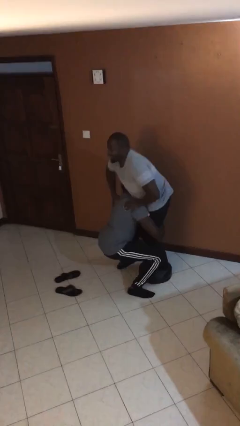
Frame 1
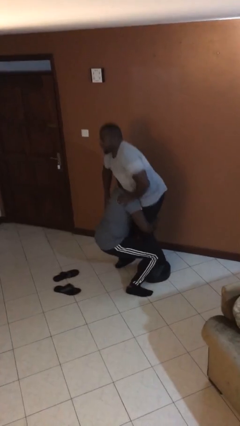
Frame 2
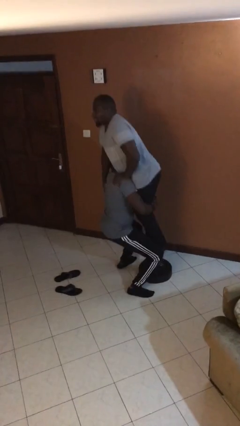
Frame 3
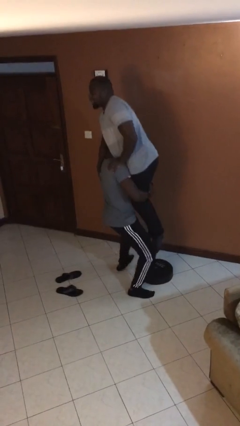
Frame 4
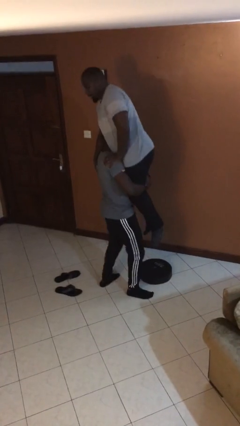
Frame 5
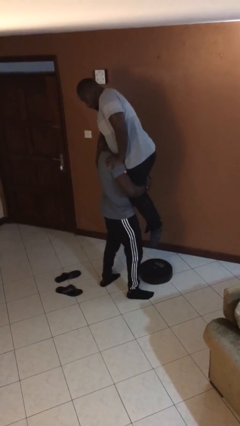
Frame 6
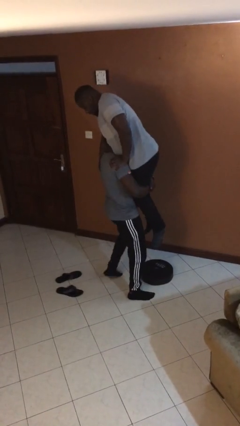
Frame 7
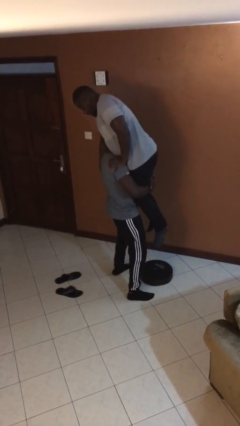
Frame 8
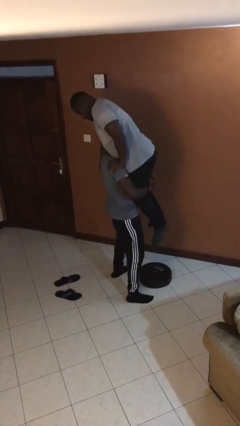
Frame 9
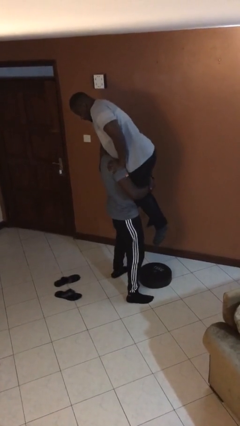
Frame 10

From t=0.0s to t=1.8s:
person picks up person

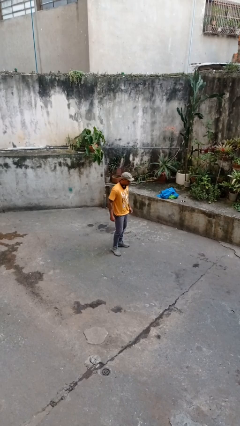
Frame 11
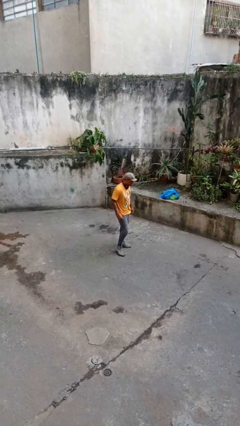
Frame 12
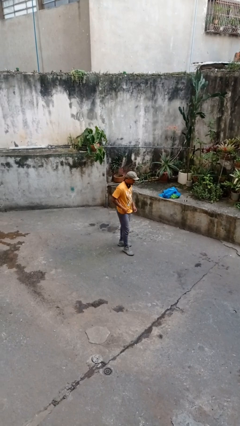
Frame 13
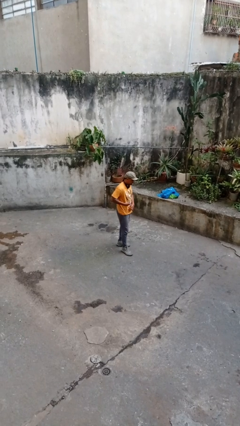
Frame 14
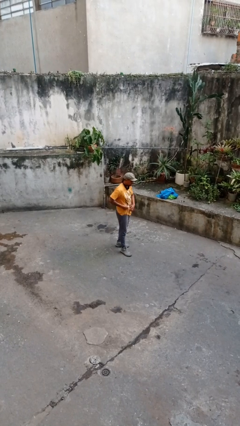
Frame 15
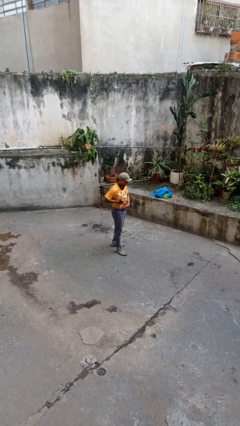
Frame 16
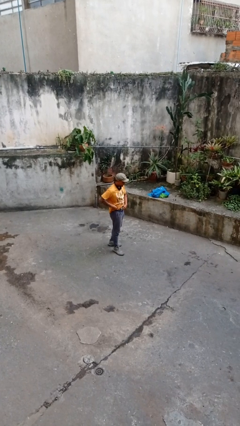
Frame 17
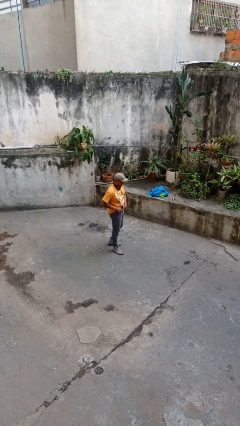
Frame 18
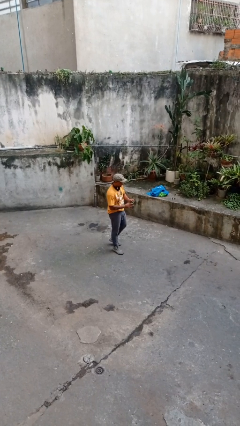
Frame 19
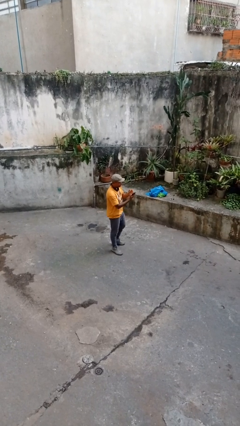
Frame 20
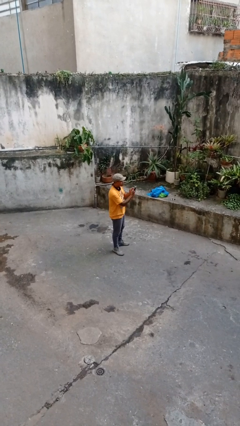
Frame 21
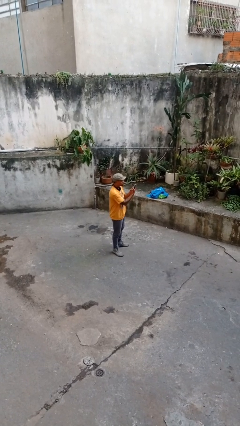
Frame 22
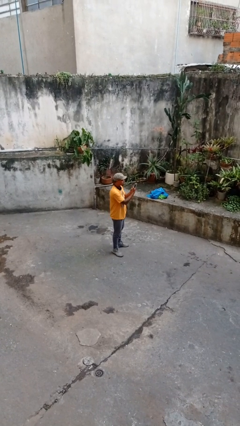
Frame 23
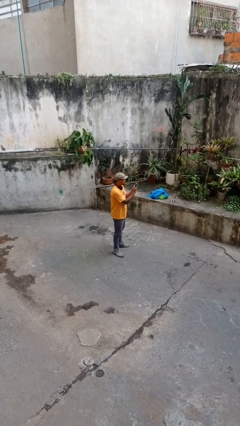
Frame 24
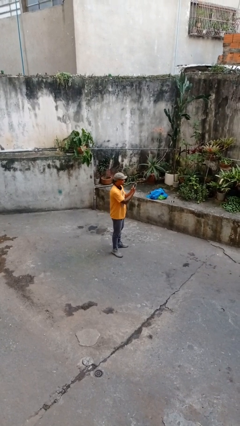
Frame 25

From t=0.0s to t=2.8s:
person takes phone from pocket

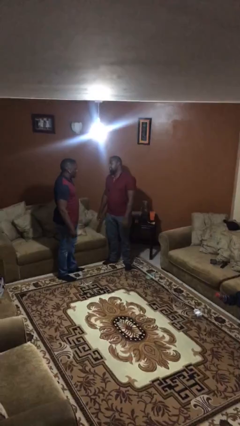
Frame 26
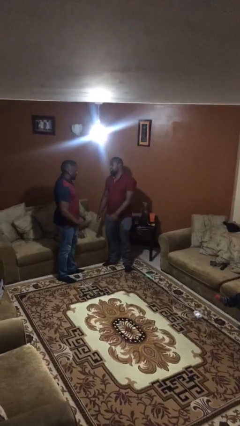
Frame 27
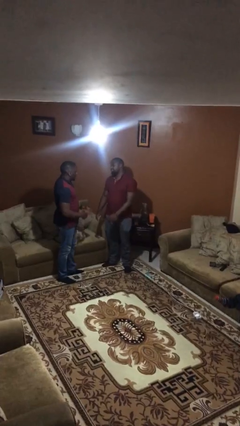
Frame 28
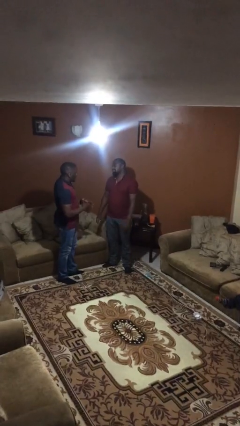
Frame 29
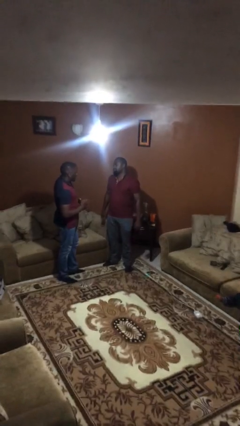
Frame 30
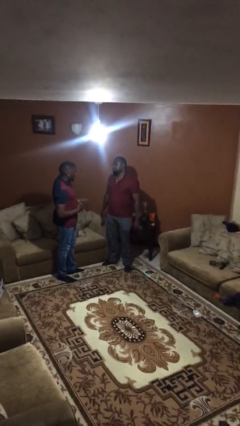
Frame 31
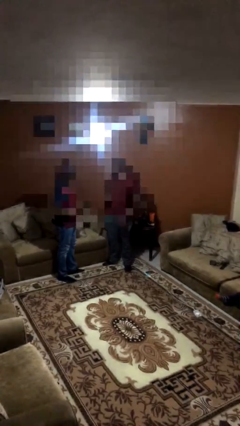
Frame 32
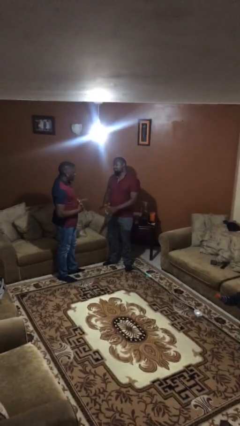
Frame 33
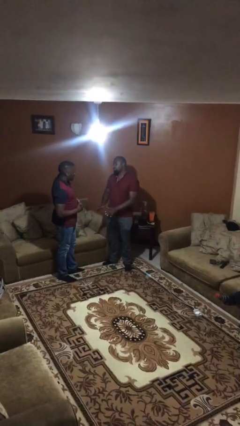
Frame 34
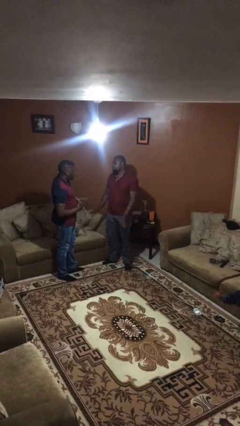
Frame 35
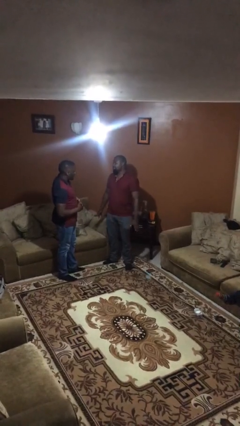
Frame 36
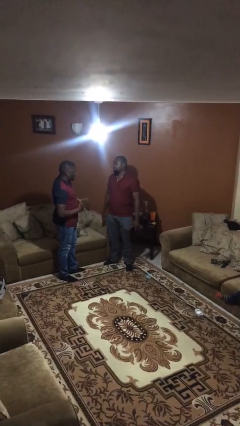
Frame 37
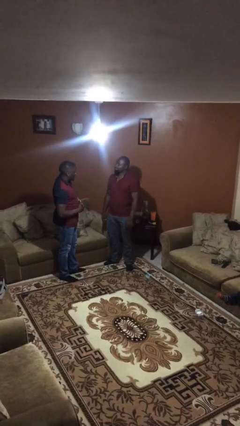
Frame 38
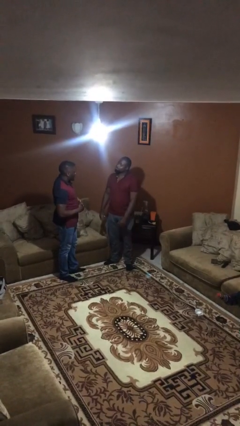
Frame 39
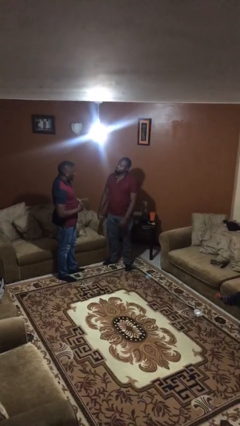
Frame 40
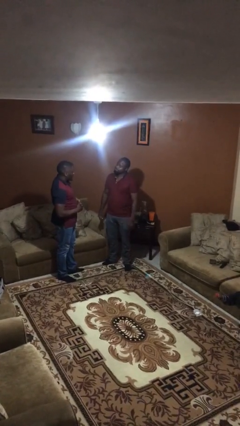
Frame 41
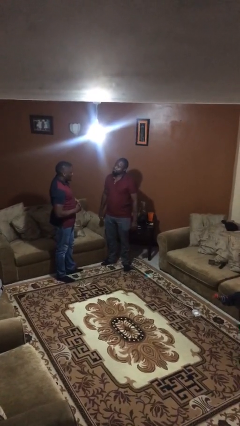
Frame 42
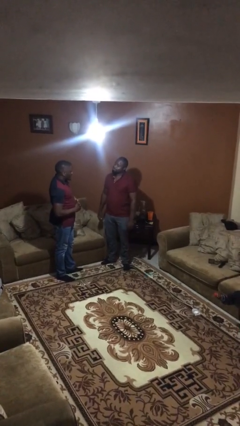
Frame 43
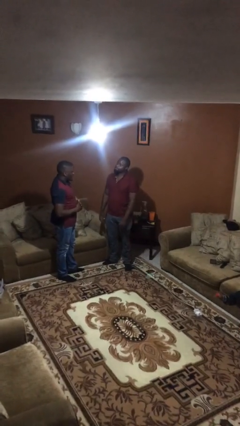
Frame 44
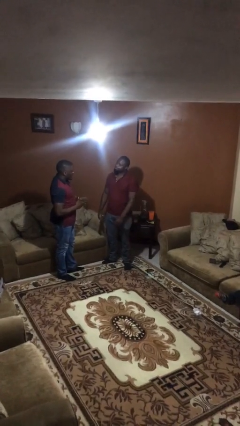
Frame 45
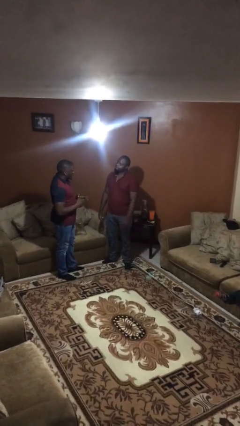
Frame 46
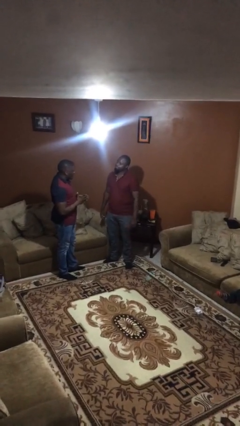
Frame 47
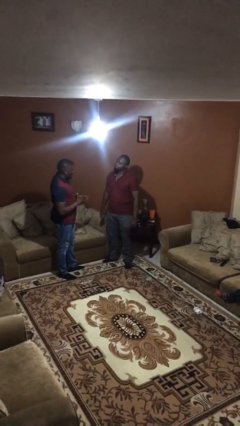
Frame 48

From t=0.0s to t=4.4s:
person talks to person

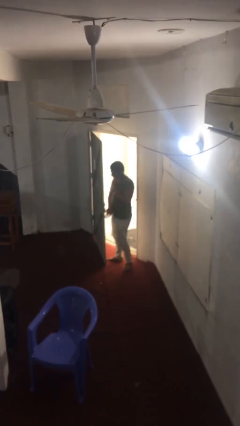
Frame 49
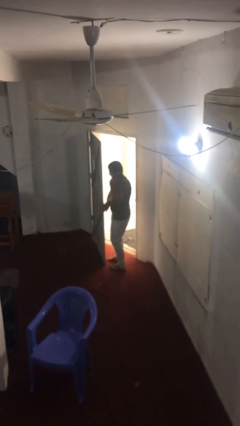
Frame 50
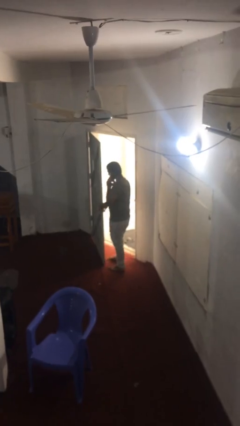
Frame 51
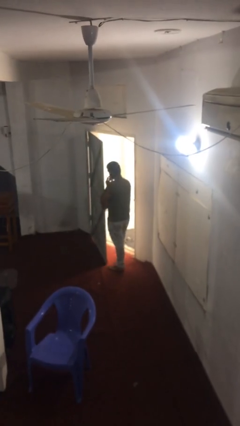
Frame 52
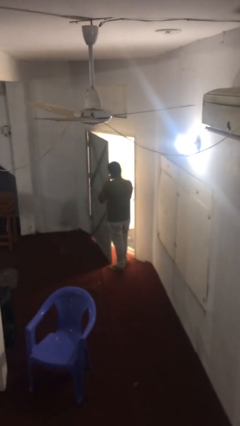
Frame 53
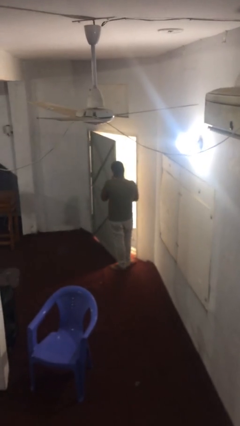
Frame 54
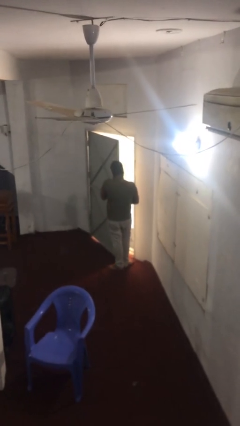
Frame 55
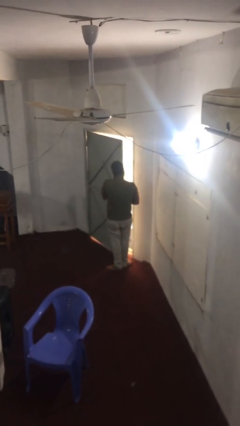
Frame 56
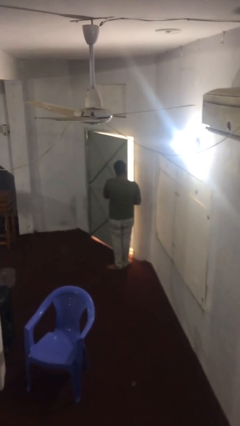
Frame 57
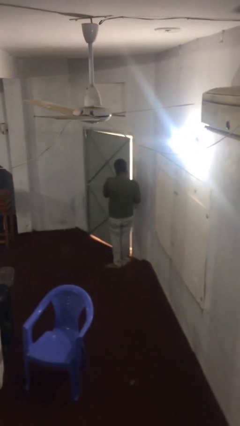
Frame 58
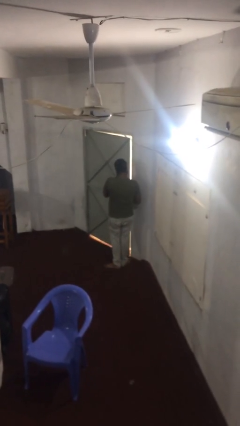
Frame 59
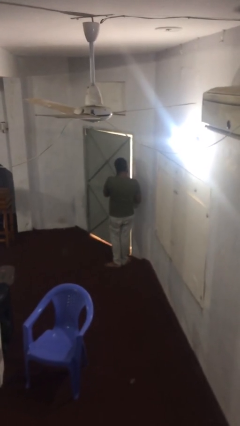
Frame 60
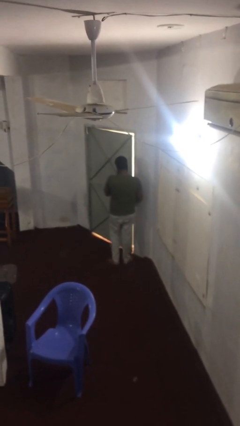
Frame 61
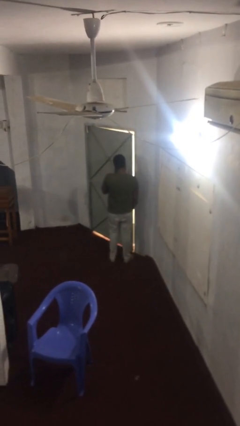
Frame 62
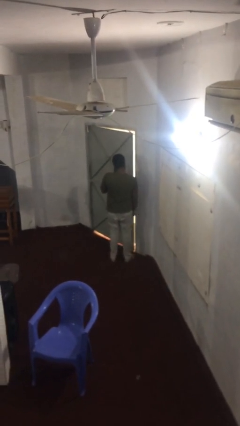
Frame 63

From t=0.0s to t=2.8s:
person closes facility door

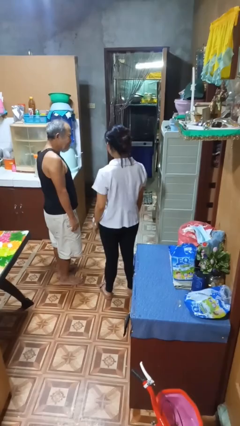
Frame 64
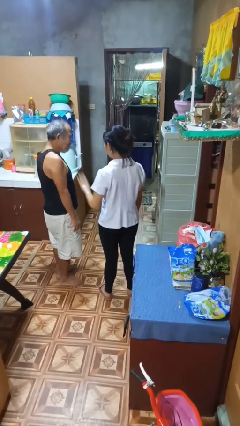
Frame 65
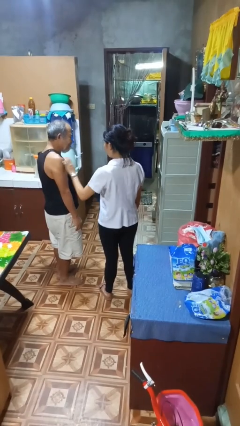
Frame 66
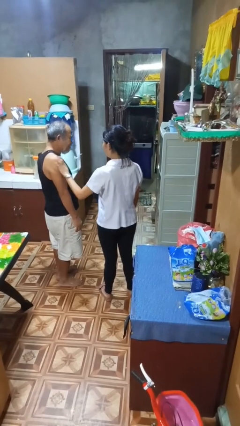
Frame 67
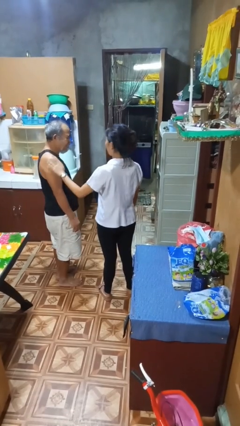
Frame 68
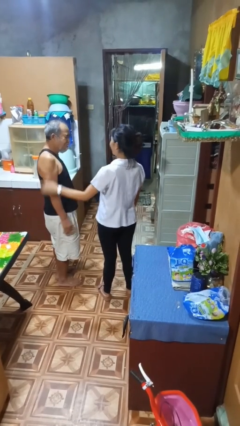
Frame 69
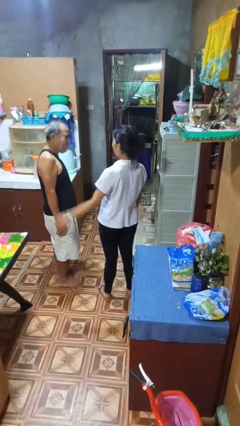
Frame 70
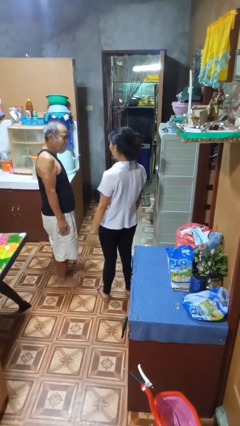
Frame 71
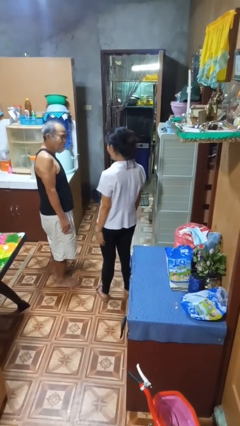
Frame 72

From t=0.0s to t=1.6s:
person shoves person

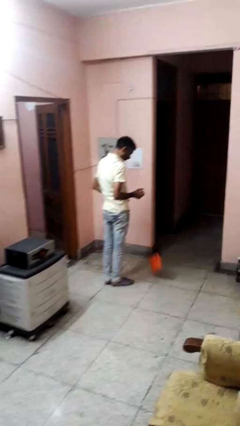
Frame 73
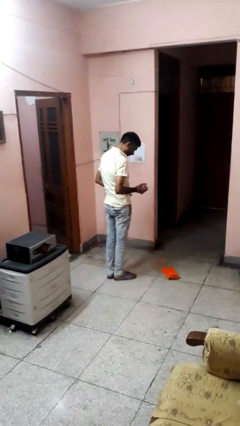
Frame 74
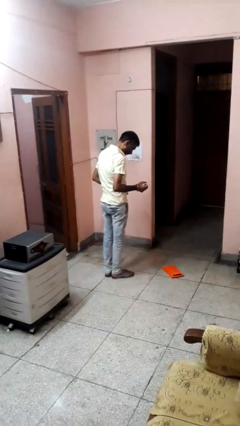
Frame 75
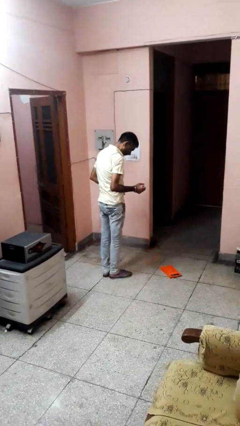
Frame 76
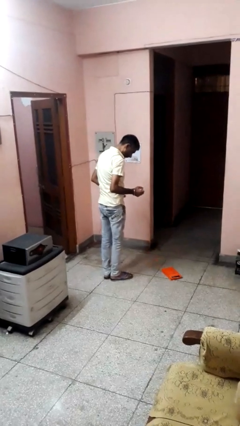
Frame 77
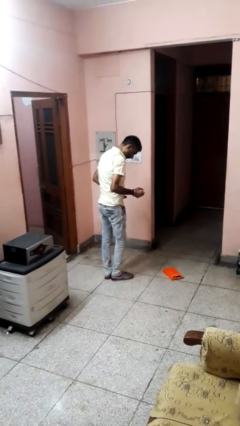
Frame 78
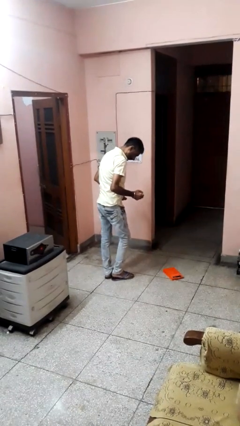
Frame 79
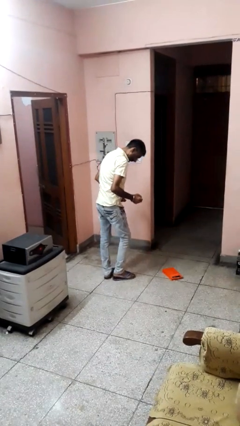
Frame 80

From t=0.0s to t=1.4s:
person drops object

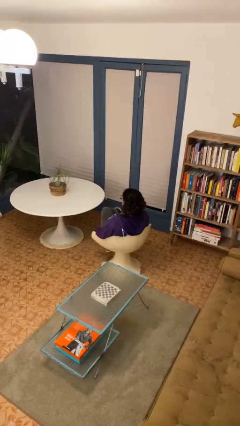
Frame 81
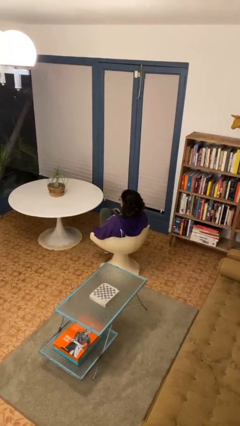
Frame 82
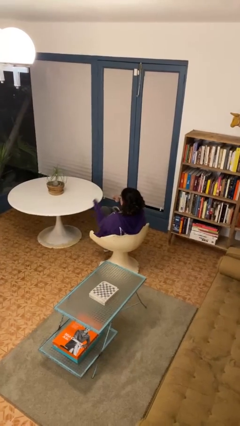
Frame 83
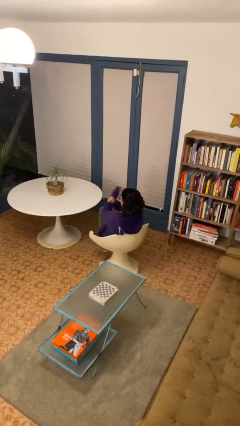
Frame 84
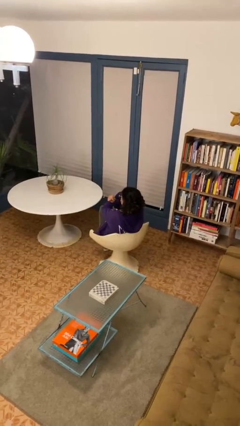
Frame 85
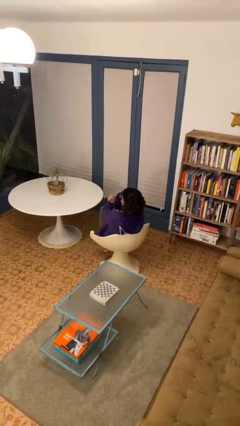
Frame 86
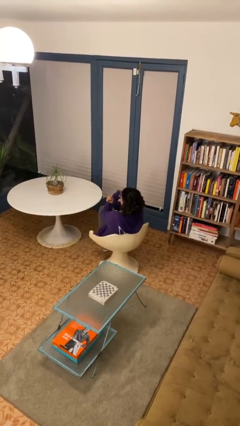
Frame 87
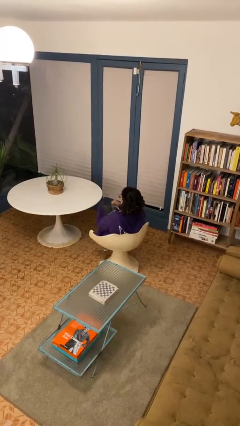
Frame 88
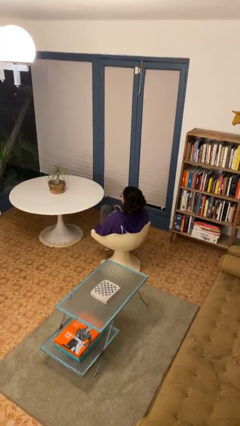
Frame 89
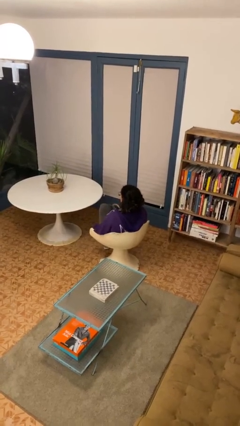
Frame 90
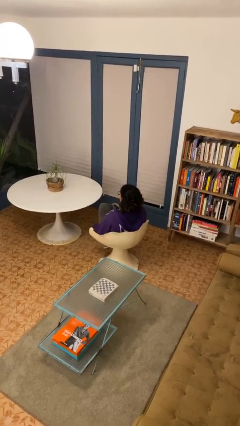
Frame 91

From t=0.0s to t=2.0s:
person gestures arms x

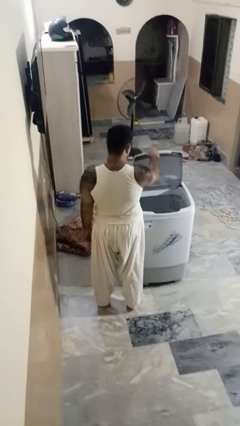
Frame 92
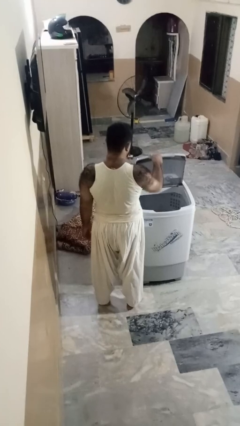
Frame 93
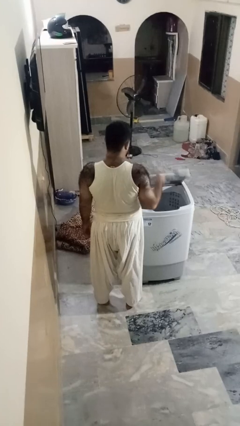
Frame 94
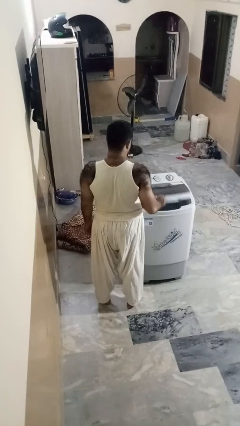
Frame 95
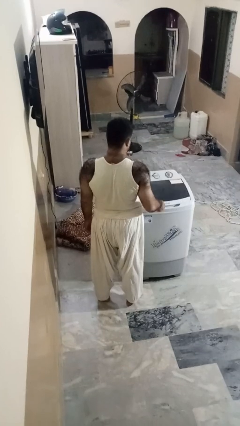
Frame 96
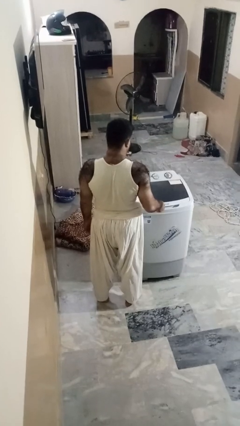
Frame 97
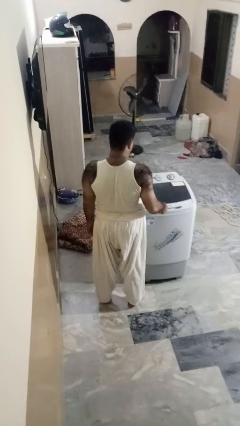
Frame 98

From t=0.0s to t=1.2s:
person closes clothes washer
